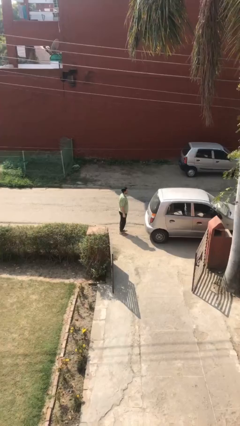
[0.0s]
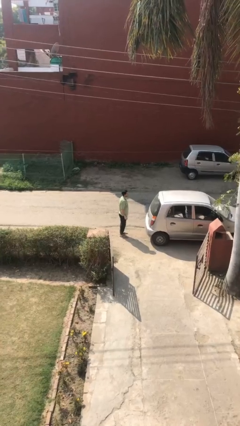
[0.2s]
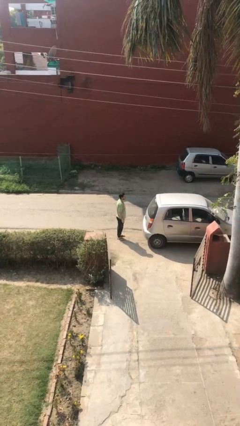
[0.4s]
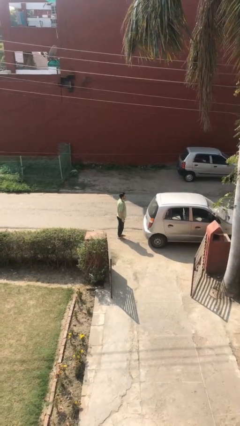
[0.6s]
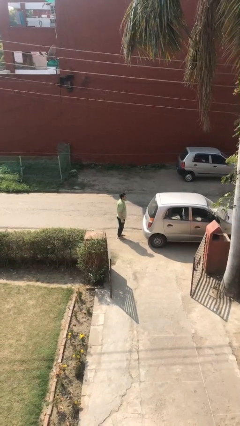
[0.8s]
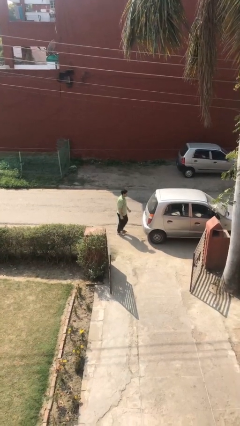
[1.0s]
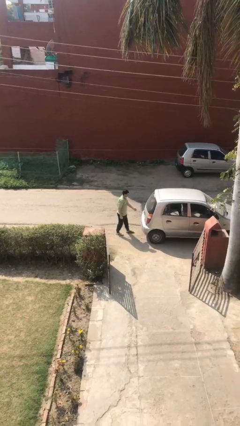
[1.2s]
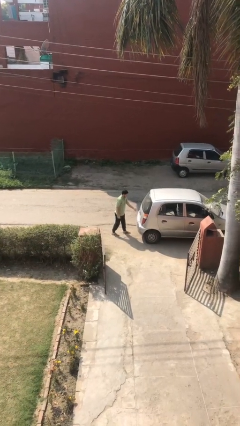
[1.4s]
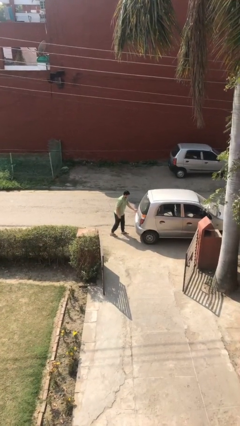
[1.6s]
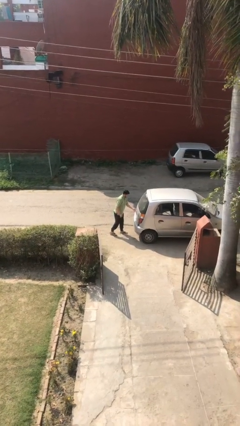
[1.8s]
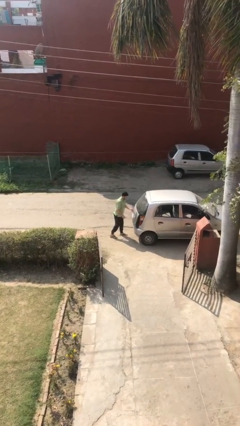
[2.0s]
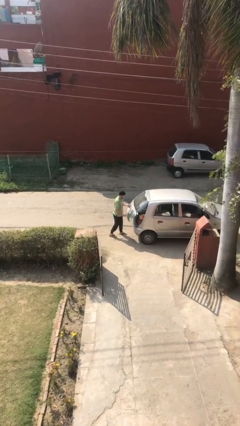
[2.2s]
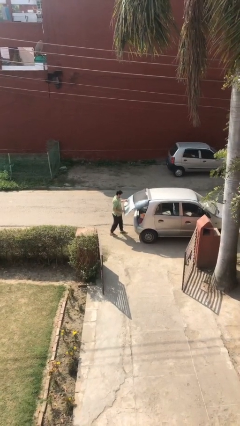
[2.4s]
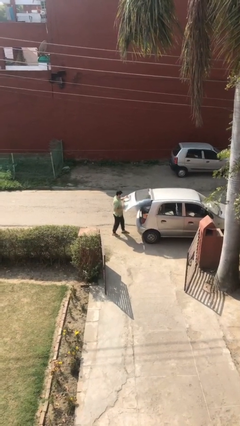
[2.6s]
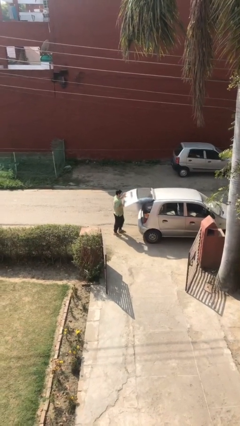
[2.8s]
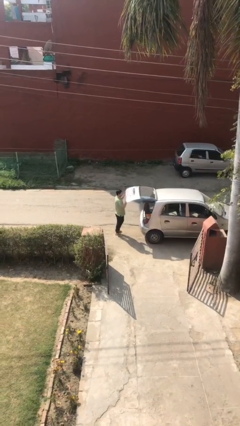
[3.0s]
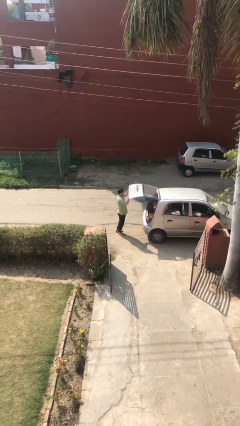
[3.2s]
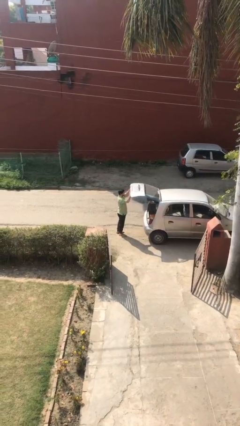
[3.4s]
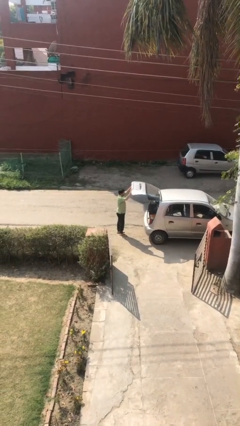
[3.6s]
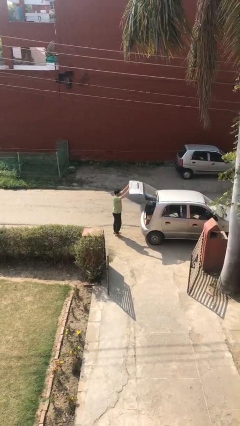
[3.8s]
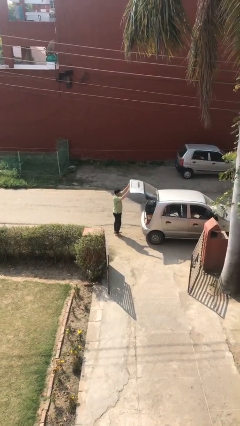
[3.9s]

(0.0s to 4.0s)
person opens car trunk

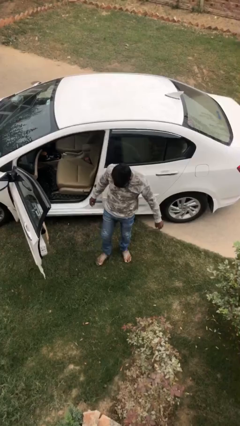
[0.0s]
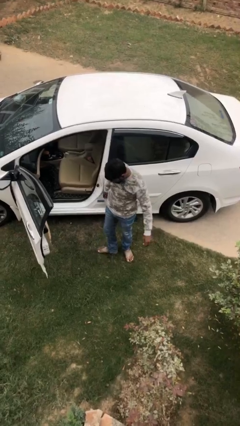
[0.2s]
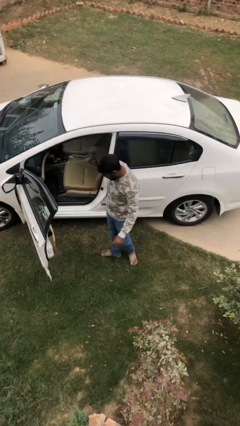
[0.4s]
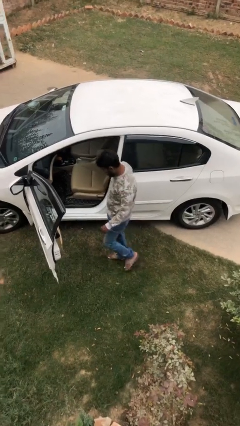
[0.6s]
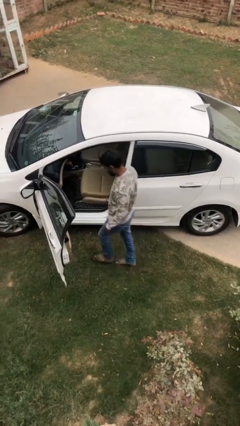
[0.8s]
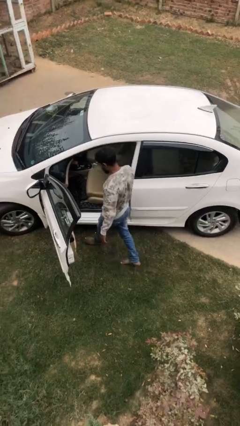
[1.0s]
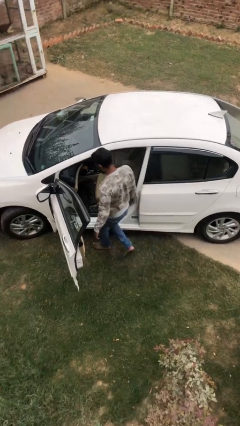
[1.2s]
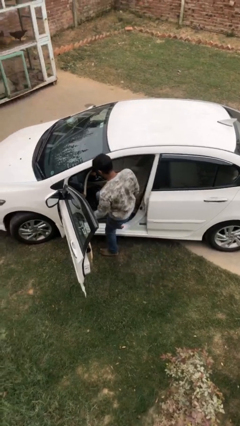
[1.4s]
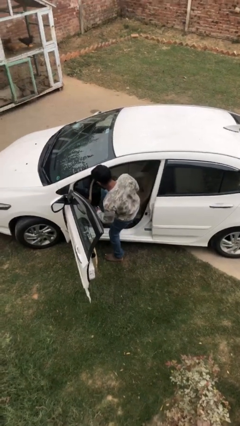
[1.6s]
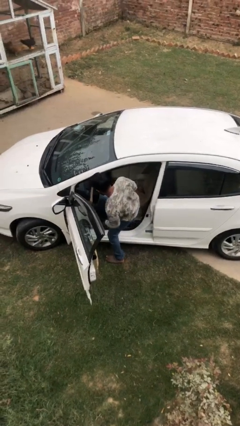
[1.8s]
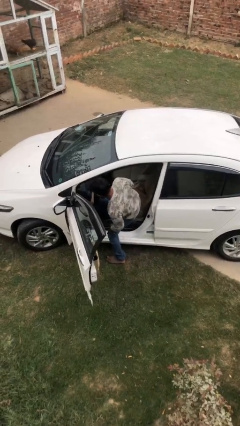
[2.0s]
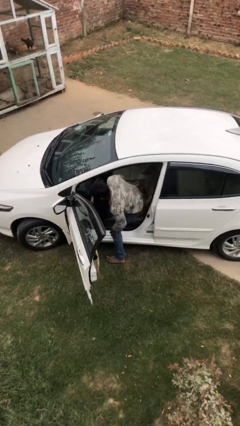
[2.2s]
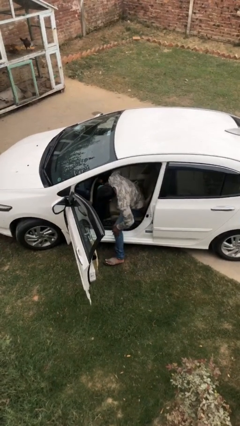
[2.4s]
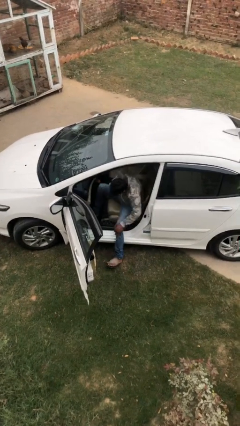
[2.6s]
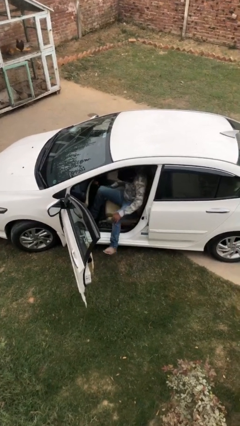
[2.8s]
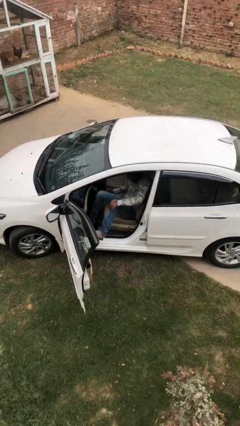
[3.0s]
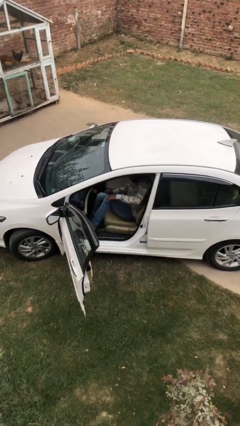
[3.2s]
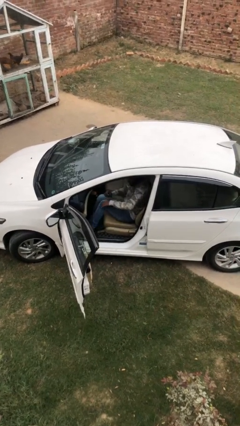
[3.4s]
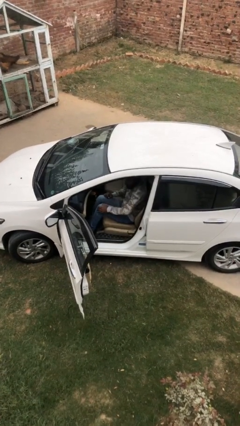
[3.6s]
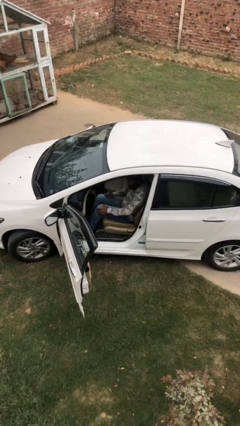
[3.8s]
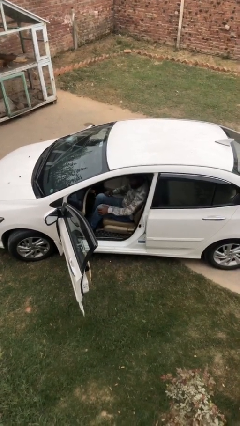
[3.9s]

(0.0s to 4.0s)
person enters car

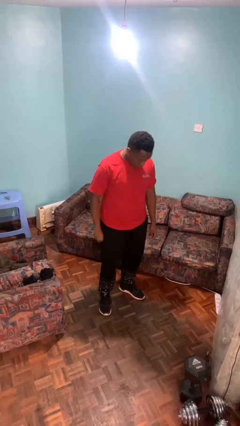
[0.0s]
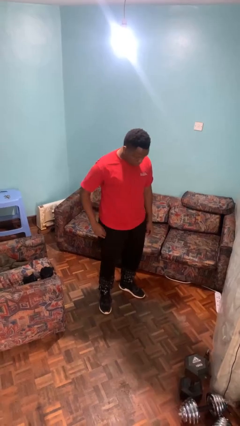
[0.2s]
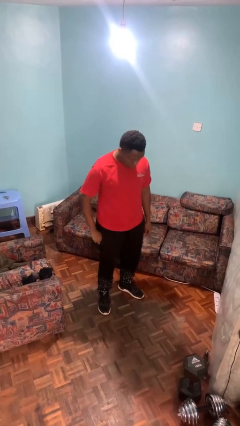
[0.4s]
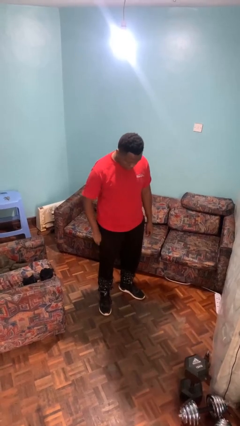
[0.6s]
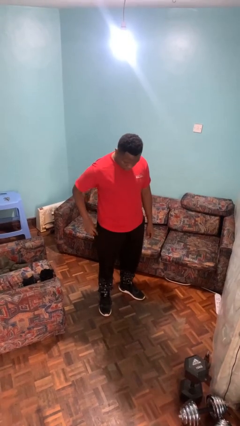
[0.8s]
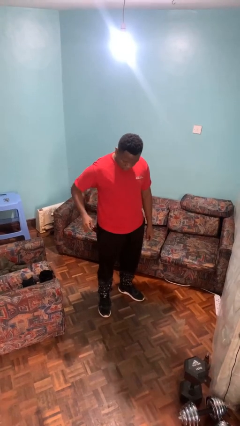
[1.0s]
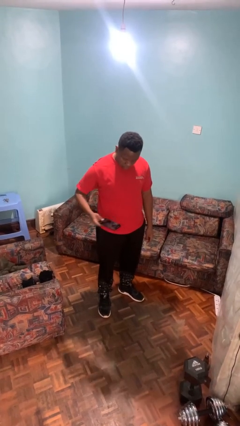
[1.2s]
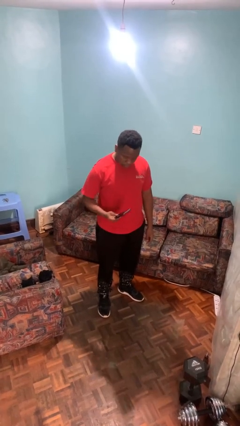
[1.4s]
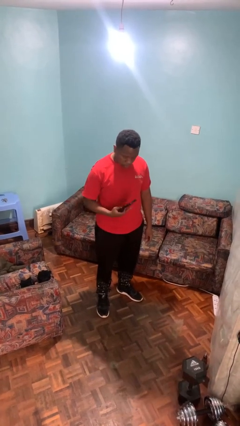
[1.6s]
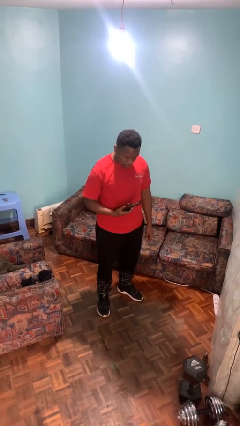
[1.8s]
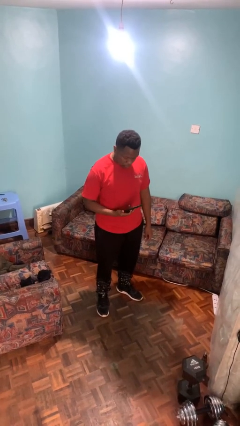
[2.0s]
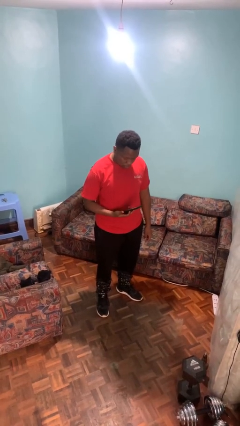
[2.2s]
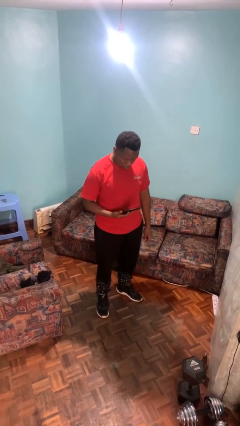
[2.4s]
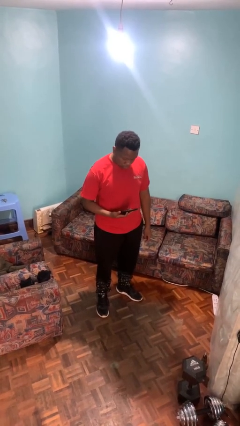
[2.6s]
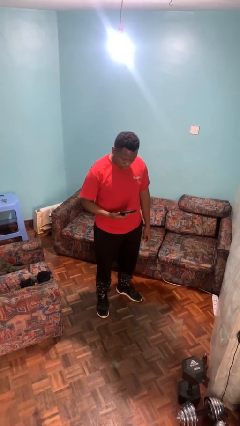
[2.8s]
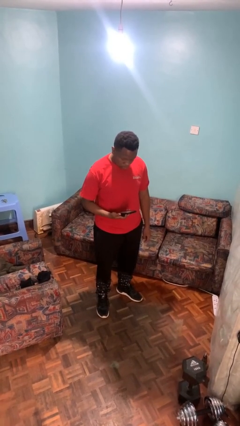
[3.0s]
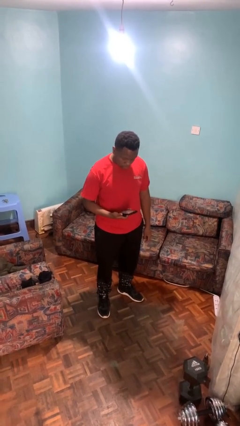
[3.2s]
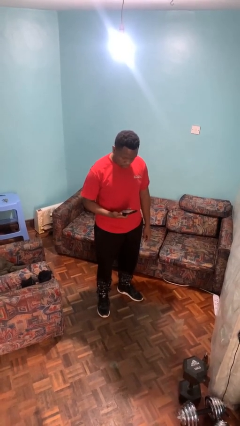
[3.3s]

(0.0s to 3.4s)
person takes phone from pocket

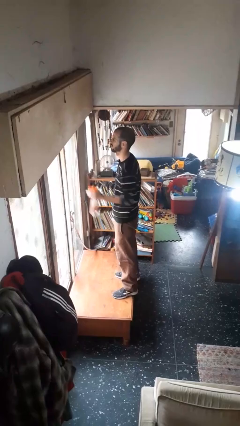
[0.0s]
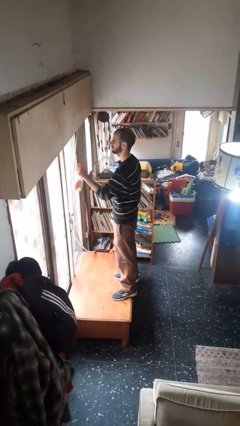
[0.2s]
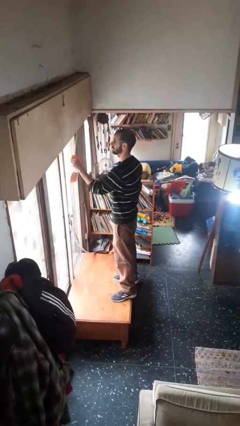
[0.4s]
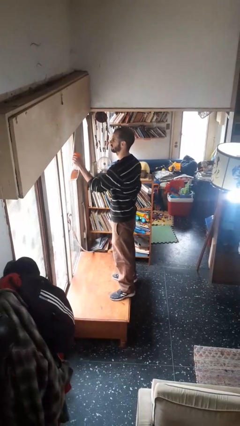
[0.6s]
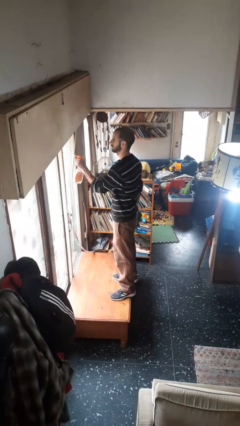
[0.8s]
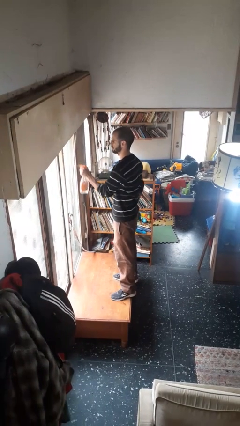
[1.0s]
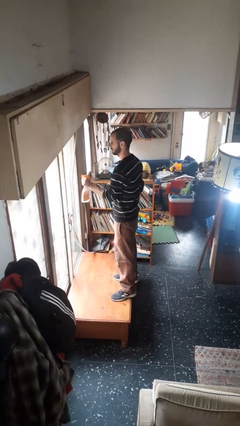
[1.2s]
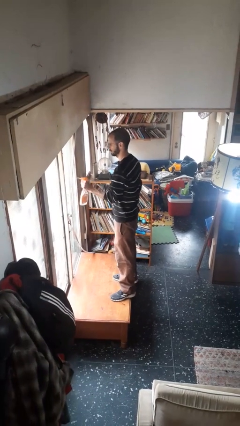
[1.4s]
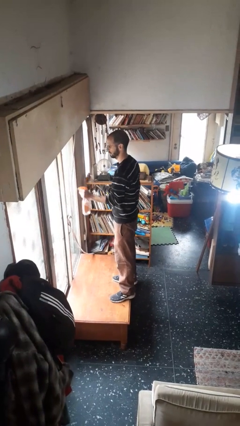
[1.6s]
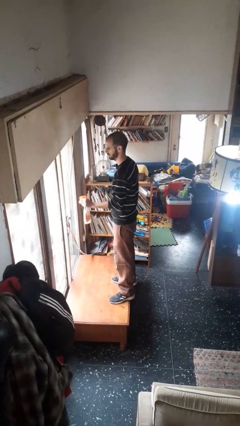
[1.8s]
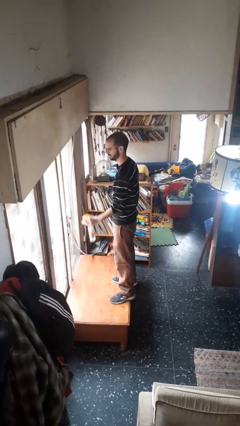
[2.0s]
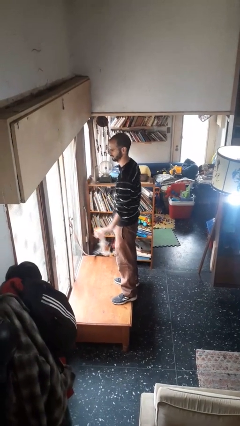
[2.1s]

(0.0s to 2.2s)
person sprays from bottle

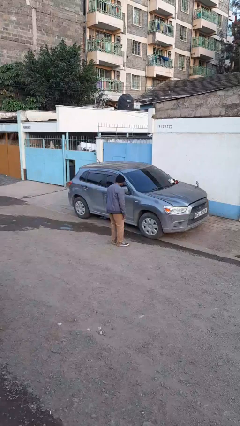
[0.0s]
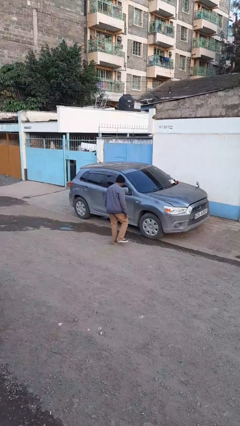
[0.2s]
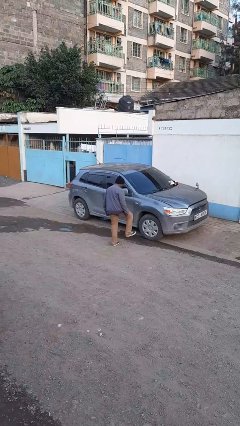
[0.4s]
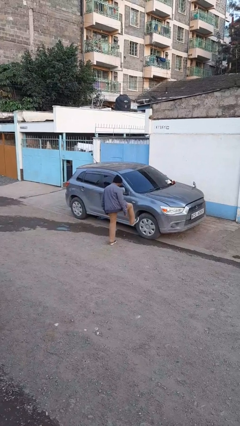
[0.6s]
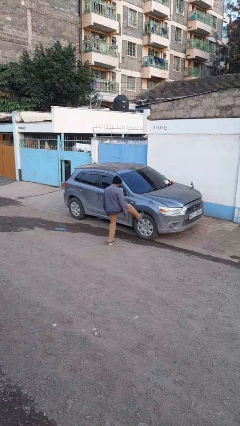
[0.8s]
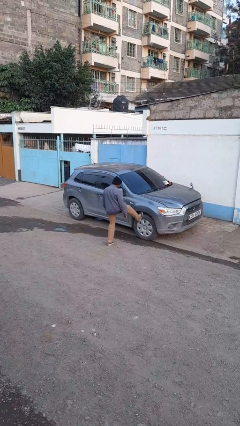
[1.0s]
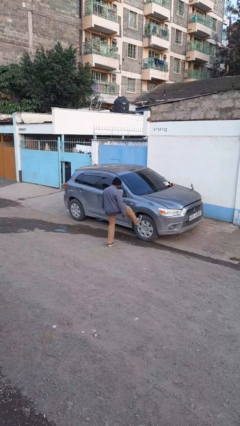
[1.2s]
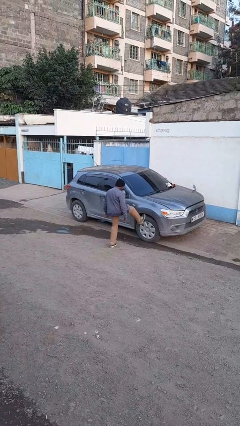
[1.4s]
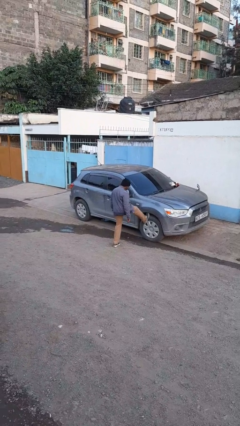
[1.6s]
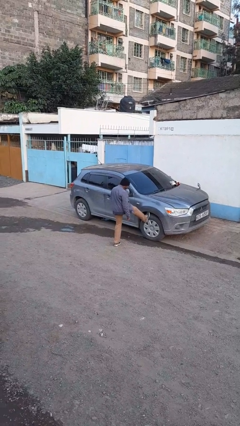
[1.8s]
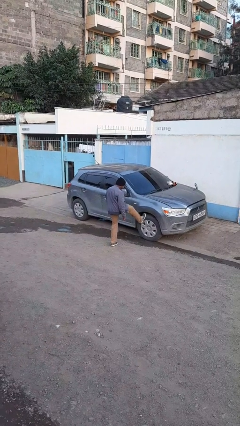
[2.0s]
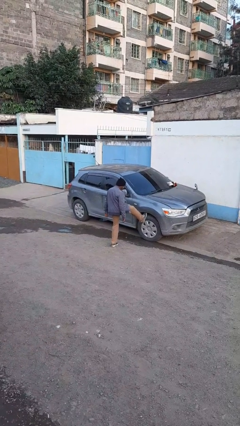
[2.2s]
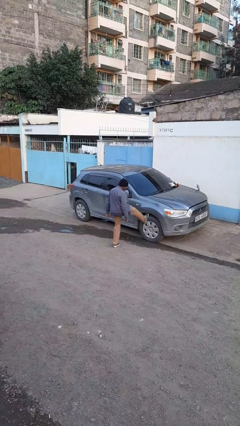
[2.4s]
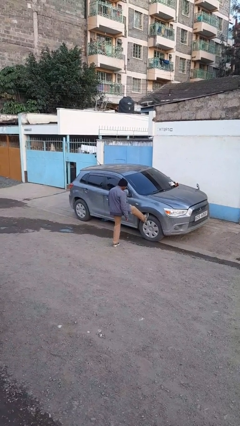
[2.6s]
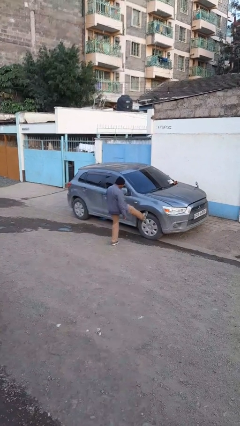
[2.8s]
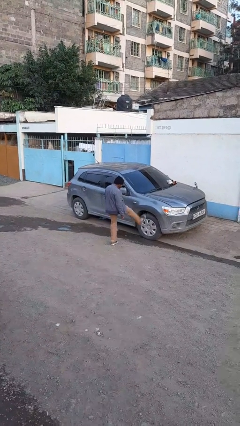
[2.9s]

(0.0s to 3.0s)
person kicks car tires

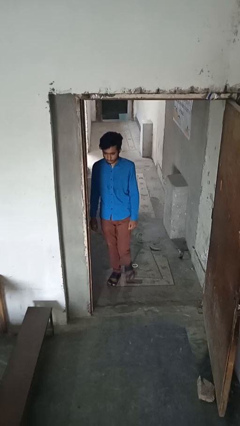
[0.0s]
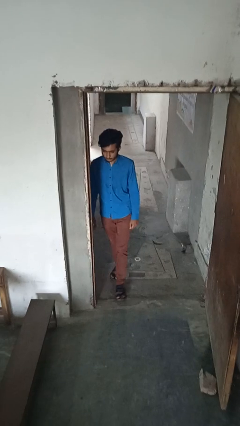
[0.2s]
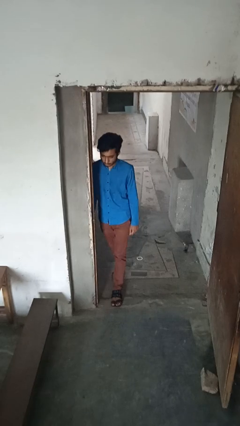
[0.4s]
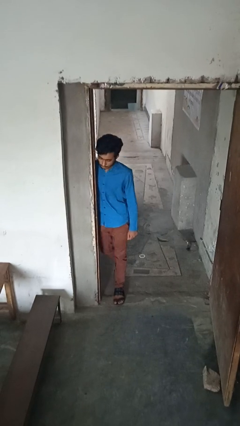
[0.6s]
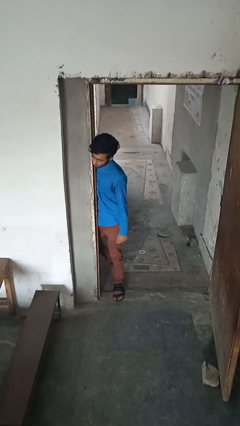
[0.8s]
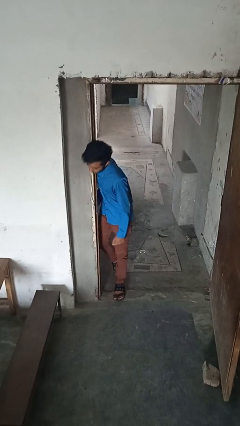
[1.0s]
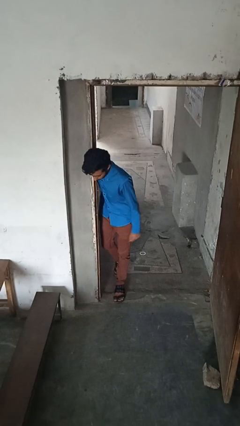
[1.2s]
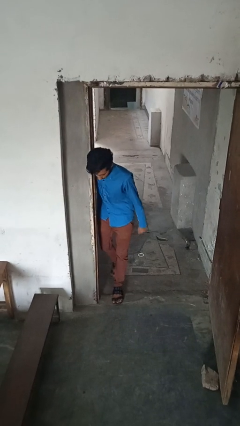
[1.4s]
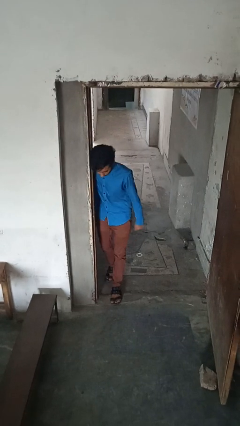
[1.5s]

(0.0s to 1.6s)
person bumps into wall
